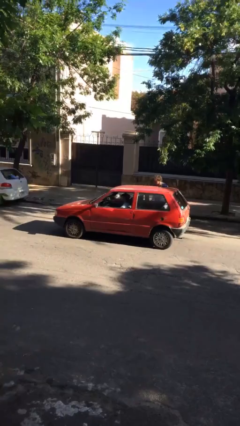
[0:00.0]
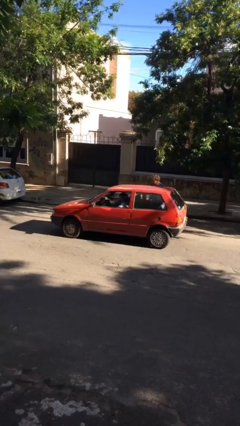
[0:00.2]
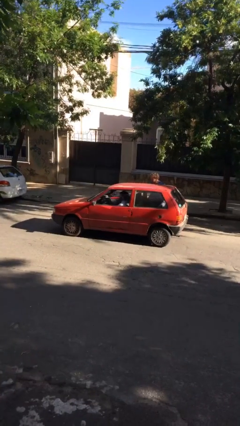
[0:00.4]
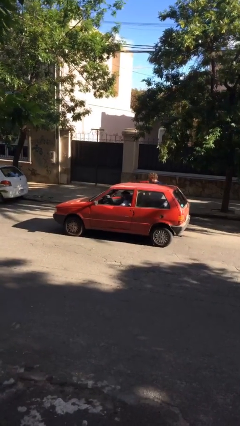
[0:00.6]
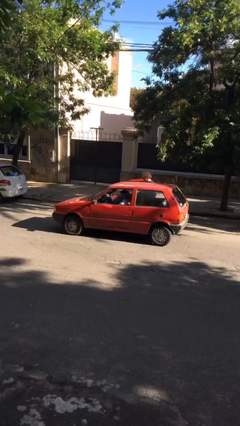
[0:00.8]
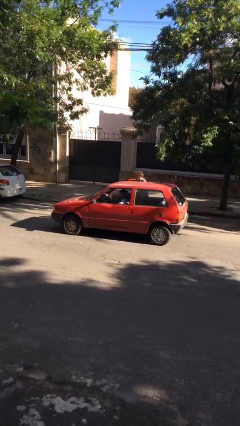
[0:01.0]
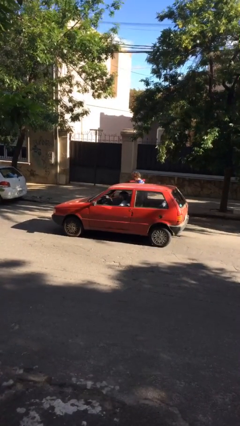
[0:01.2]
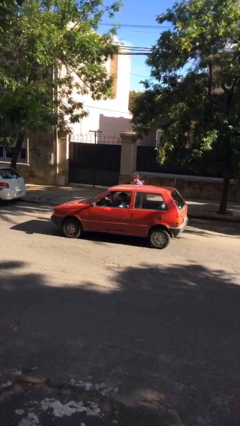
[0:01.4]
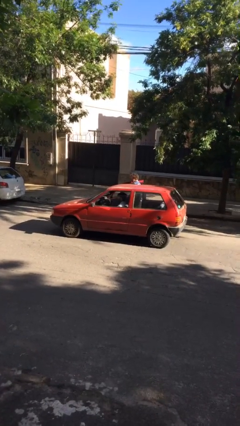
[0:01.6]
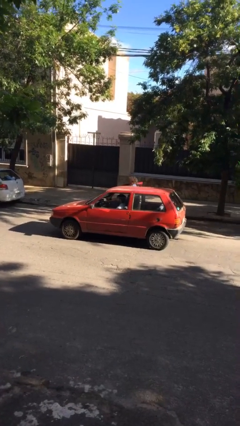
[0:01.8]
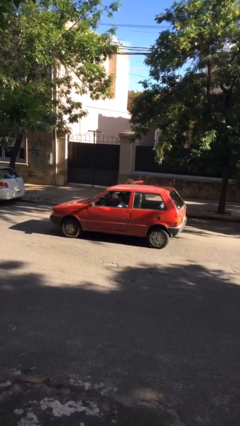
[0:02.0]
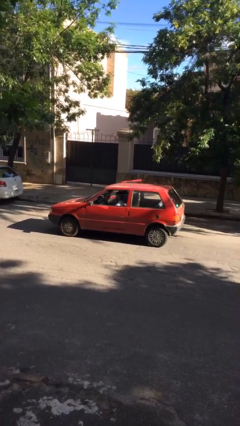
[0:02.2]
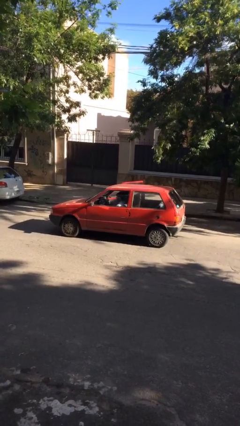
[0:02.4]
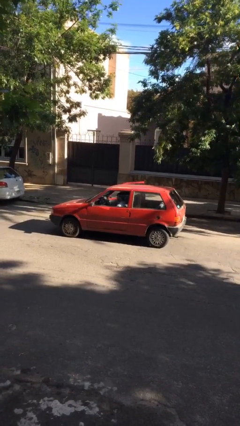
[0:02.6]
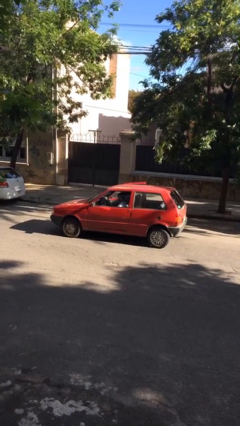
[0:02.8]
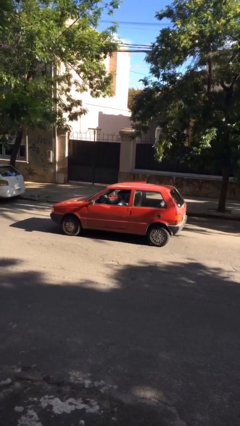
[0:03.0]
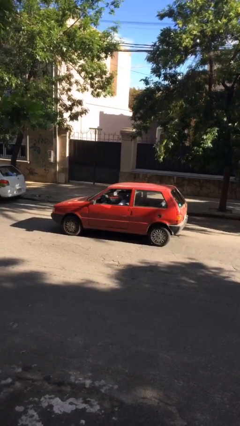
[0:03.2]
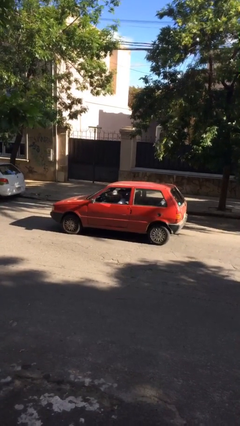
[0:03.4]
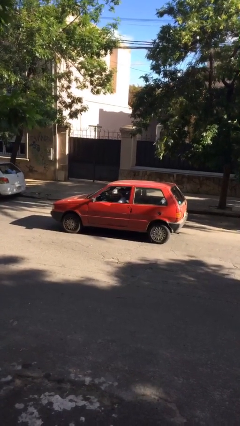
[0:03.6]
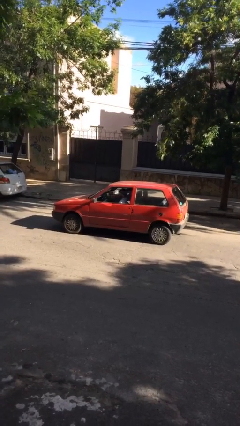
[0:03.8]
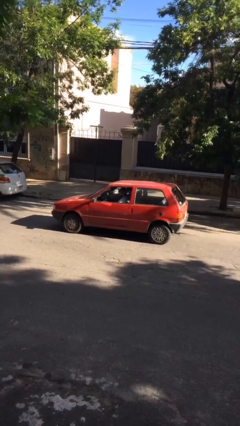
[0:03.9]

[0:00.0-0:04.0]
car picks up person

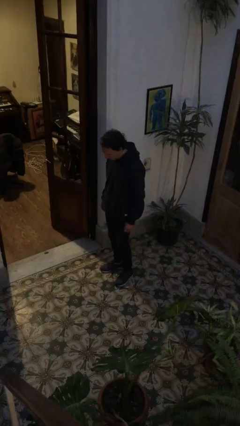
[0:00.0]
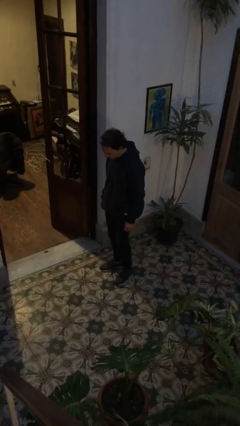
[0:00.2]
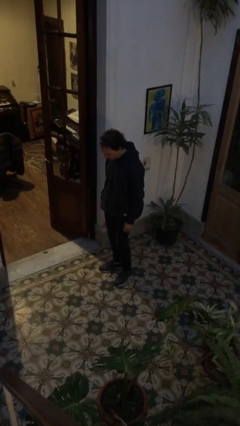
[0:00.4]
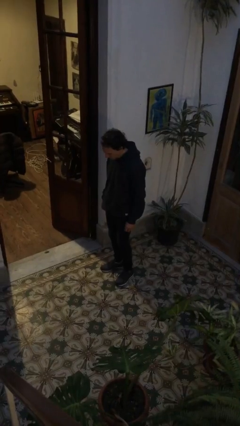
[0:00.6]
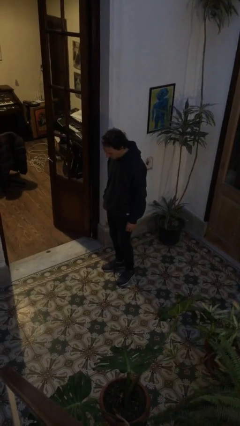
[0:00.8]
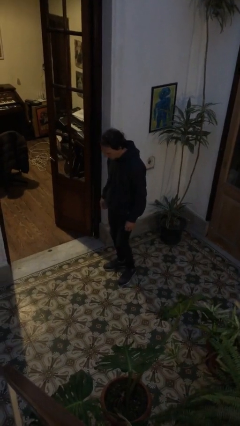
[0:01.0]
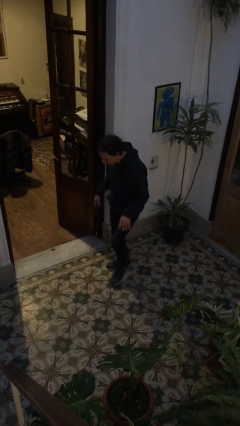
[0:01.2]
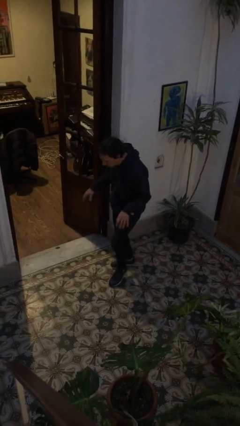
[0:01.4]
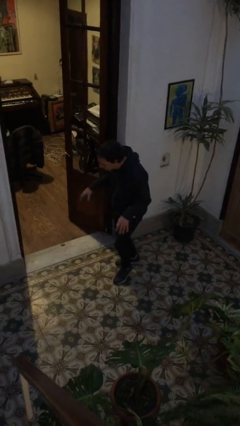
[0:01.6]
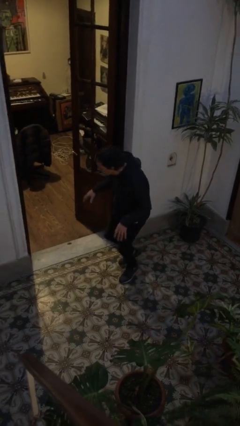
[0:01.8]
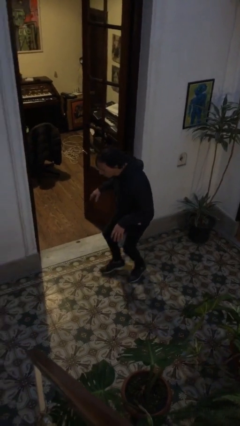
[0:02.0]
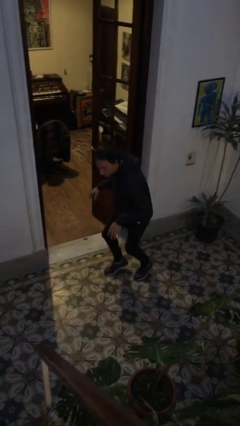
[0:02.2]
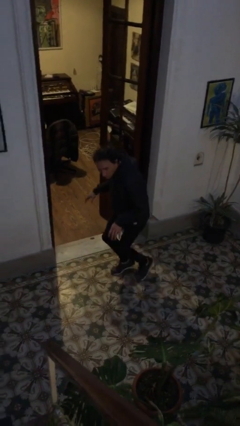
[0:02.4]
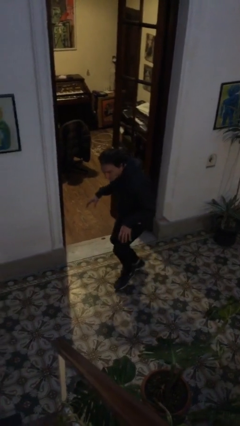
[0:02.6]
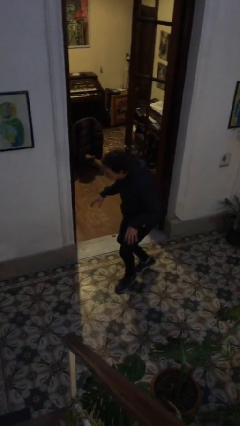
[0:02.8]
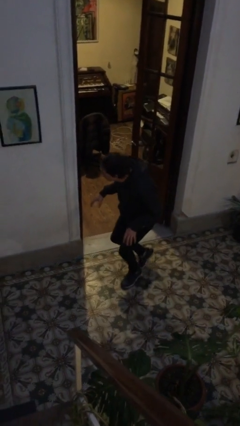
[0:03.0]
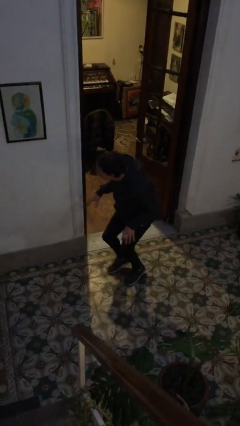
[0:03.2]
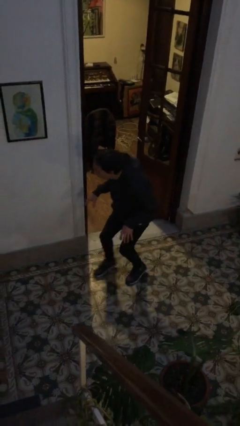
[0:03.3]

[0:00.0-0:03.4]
person walks tiptoe

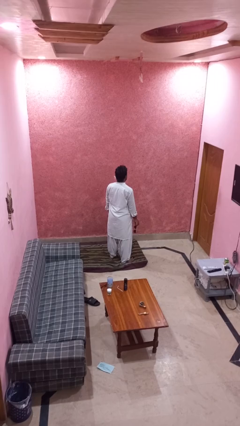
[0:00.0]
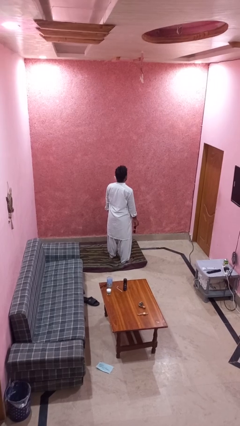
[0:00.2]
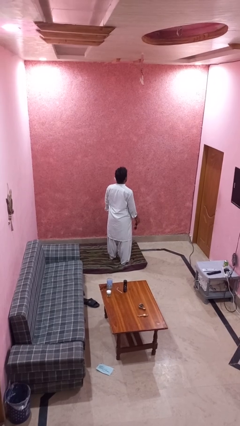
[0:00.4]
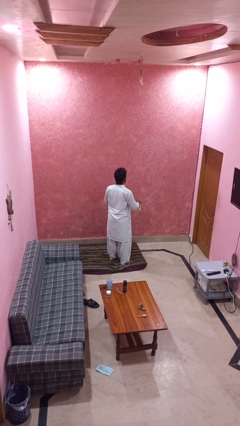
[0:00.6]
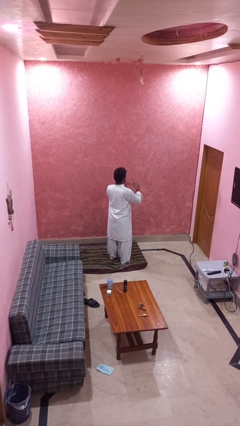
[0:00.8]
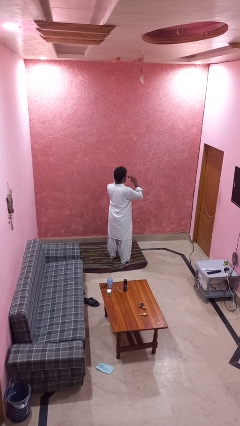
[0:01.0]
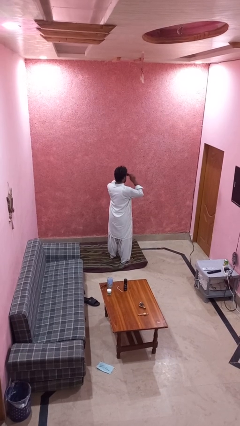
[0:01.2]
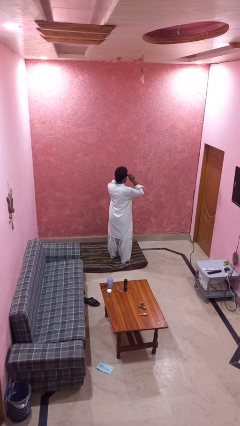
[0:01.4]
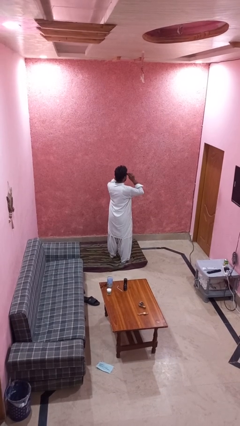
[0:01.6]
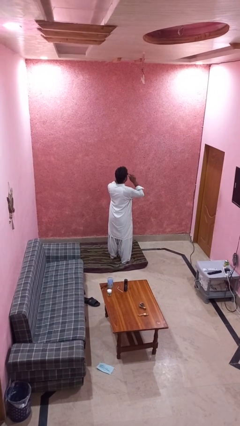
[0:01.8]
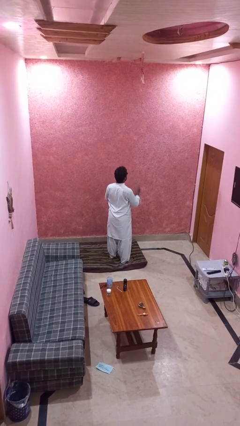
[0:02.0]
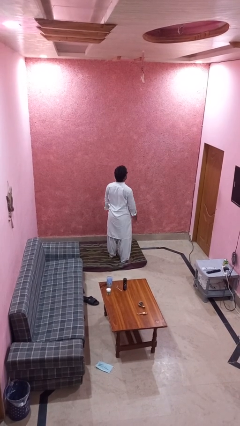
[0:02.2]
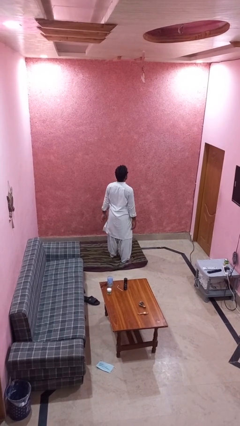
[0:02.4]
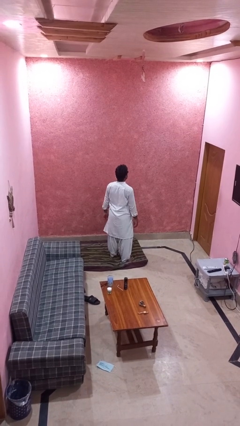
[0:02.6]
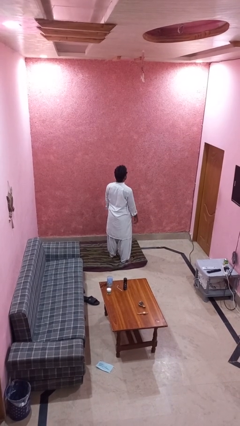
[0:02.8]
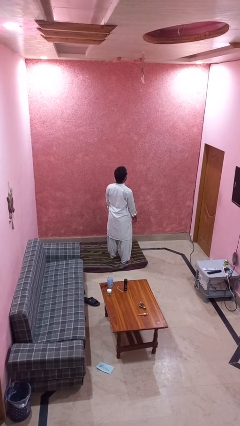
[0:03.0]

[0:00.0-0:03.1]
person puts on sunglasses

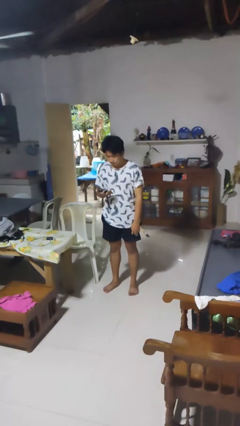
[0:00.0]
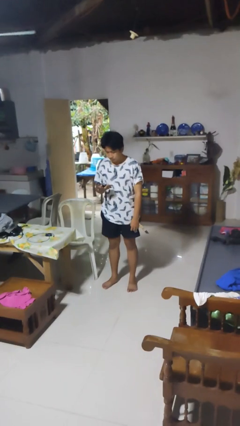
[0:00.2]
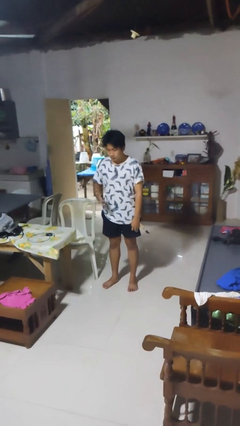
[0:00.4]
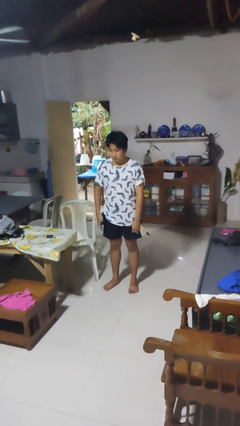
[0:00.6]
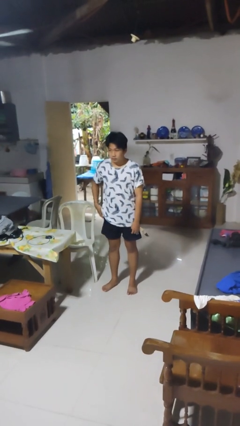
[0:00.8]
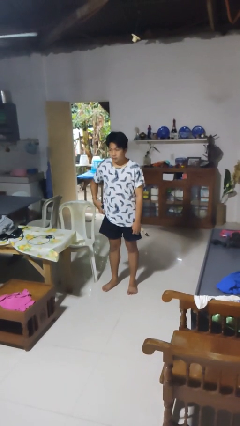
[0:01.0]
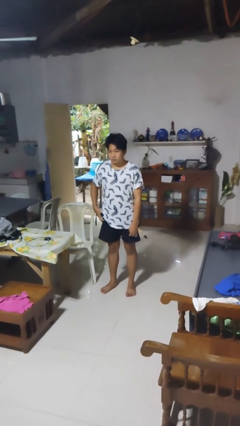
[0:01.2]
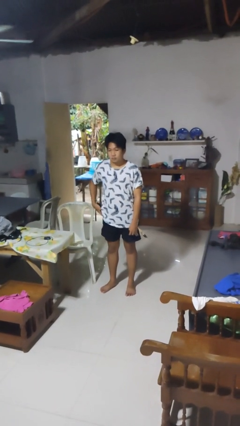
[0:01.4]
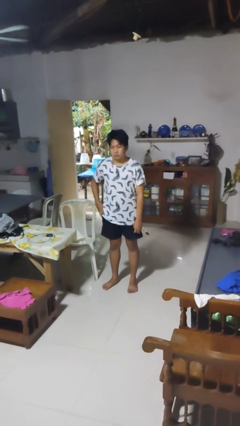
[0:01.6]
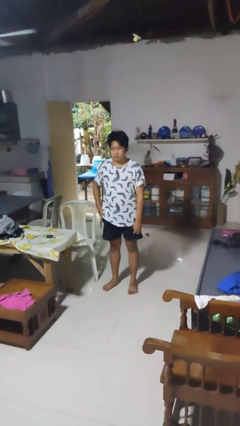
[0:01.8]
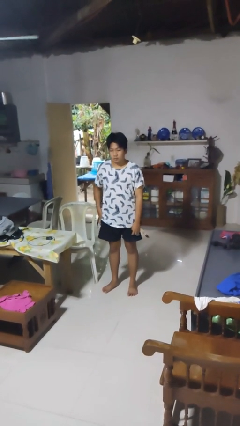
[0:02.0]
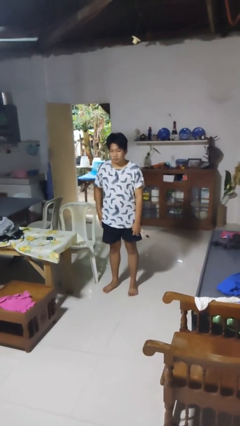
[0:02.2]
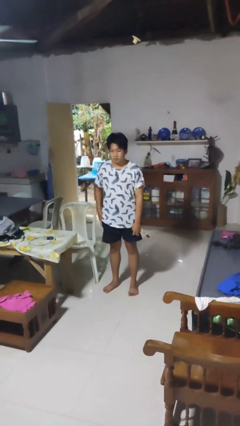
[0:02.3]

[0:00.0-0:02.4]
person puts phone into pocket

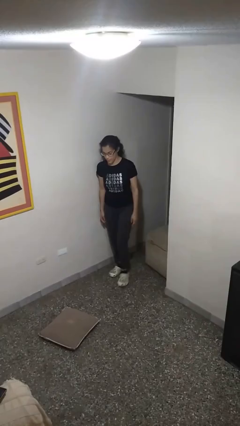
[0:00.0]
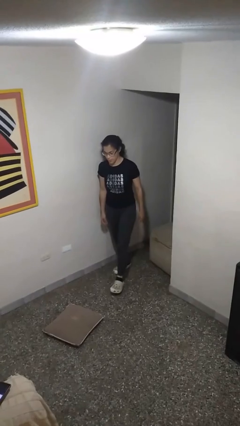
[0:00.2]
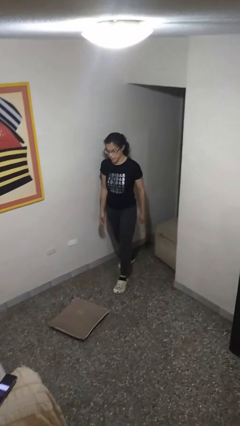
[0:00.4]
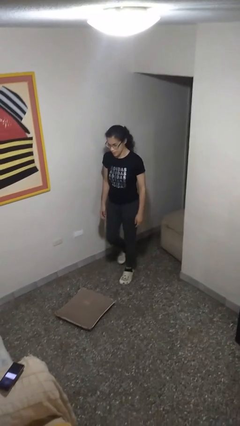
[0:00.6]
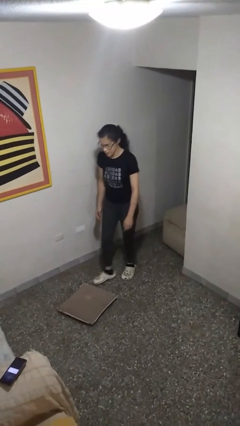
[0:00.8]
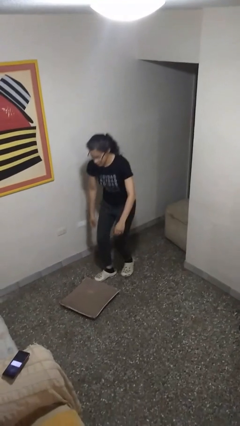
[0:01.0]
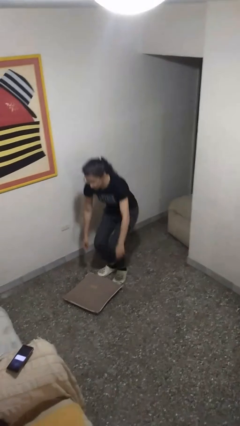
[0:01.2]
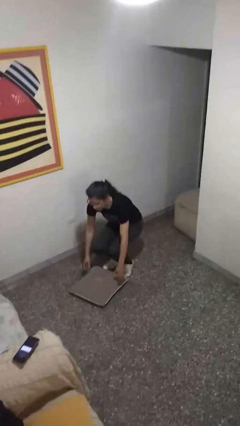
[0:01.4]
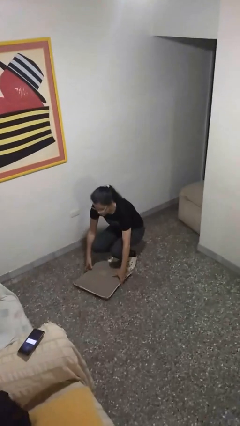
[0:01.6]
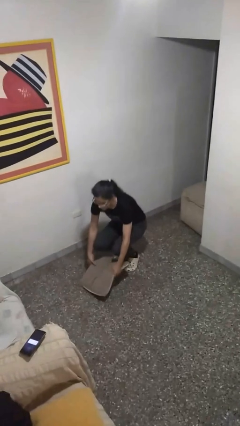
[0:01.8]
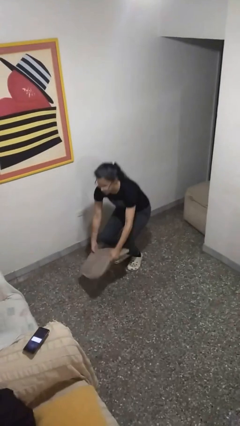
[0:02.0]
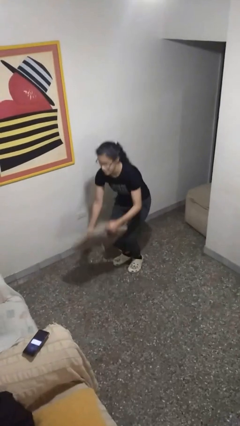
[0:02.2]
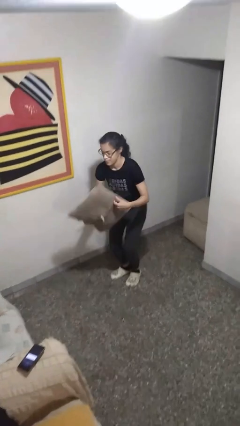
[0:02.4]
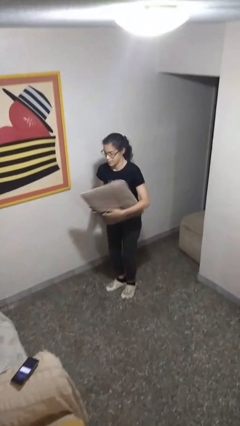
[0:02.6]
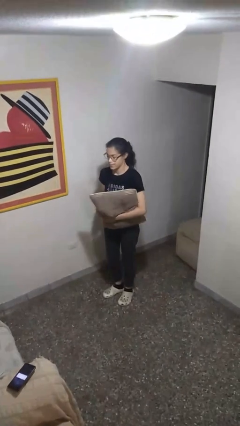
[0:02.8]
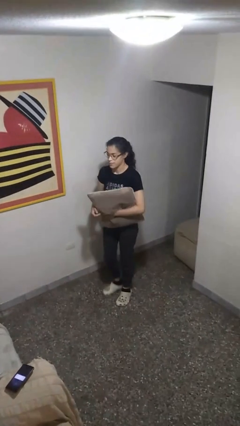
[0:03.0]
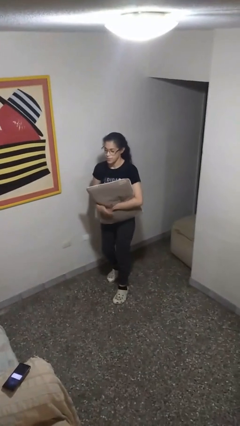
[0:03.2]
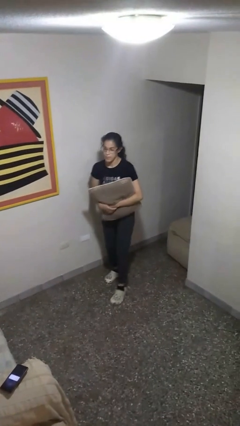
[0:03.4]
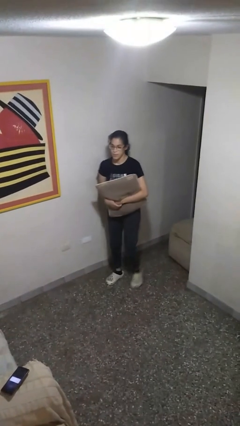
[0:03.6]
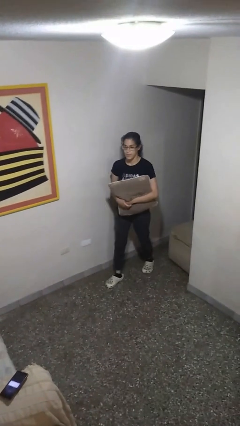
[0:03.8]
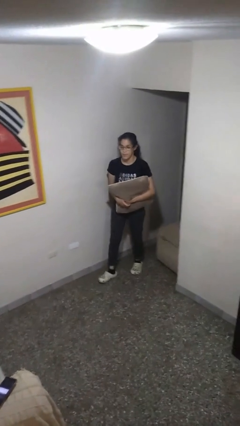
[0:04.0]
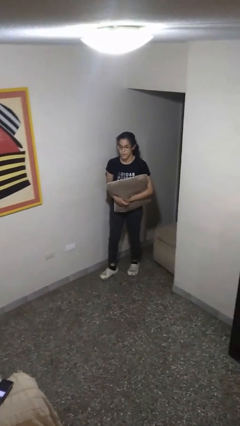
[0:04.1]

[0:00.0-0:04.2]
person picks up object from floor
